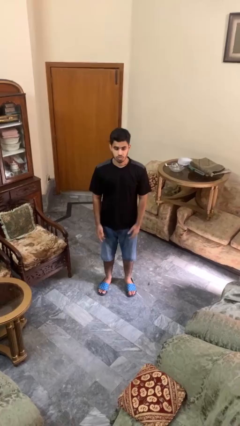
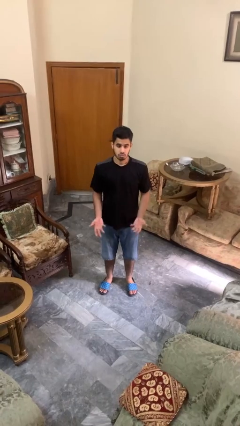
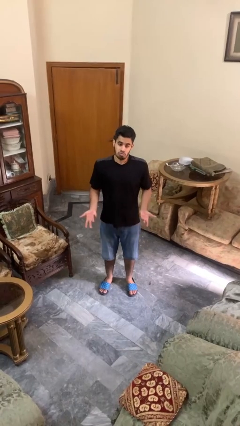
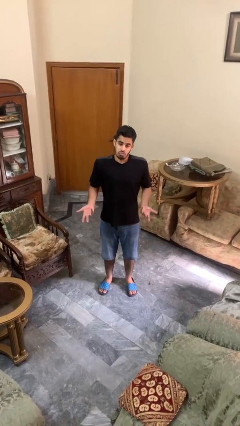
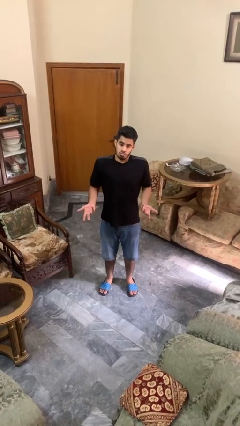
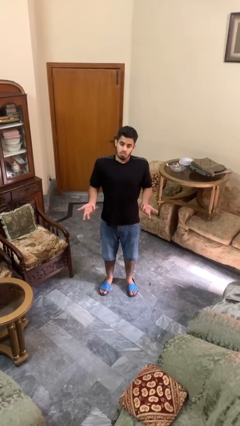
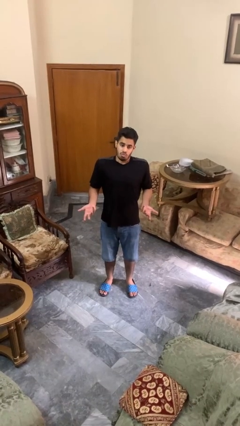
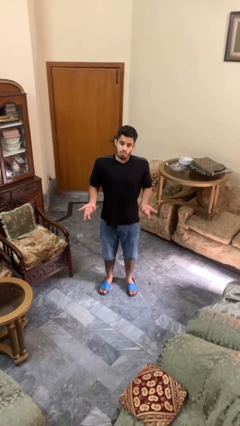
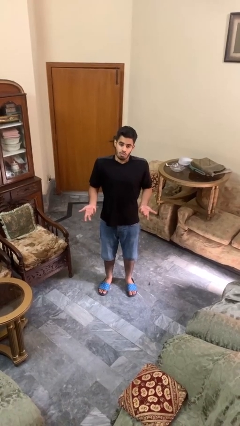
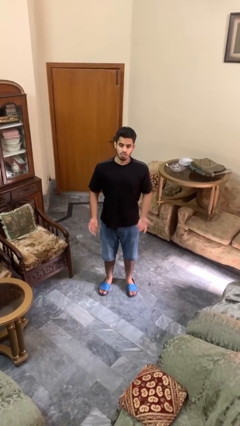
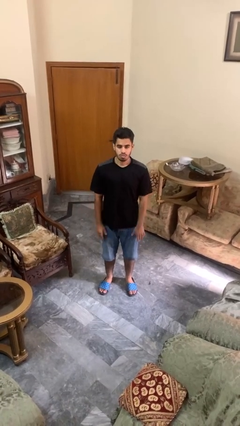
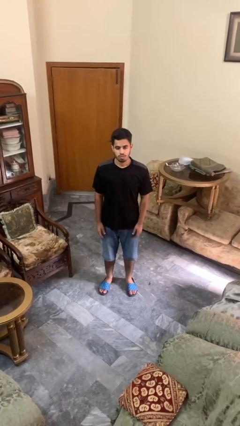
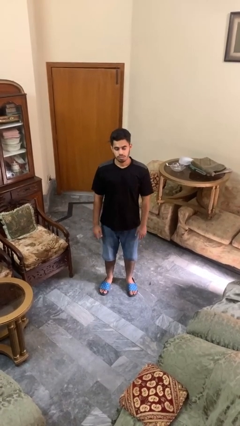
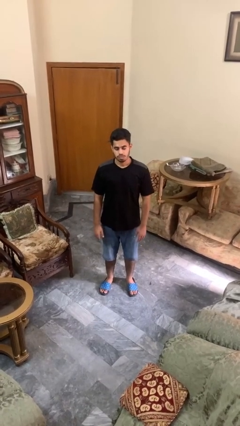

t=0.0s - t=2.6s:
person shrugs

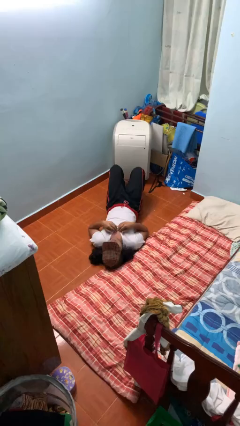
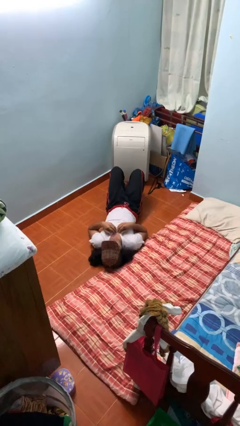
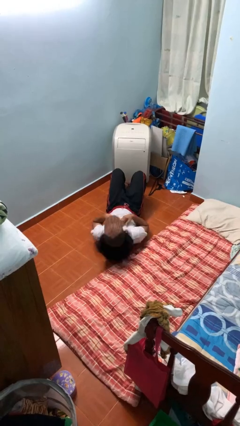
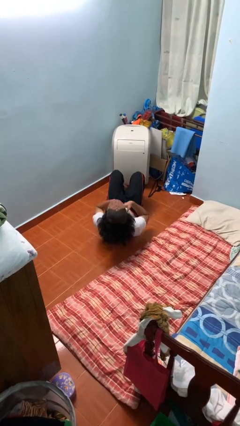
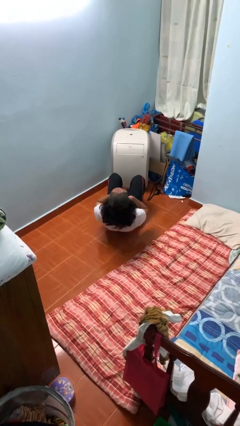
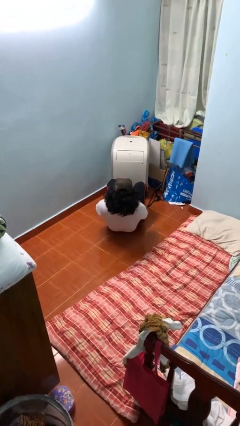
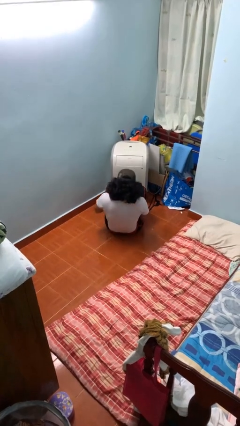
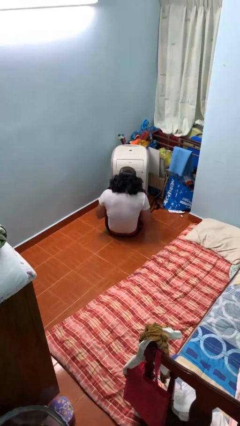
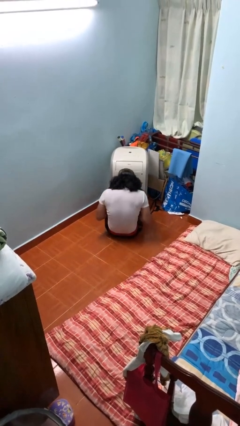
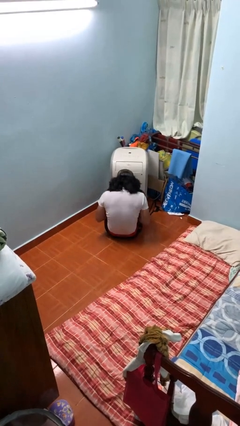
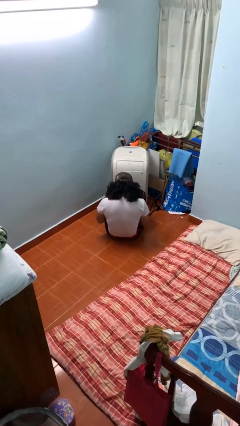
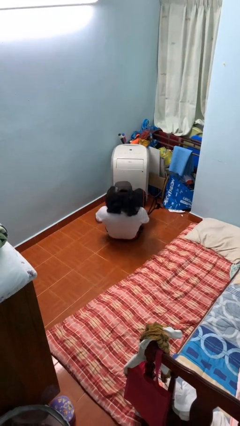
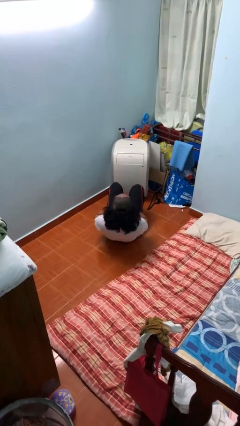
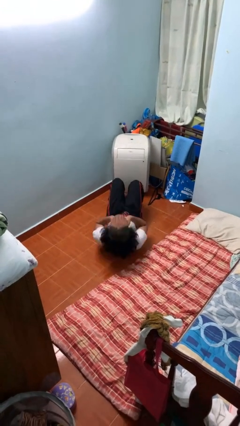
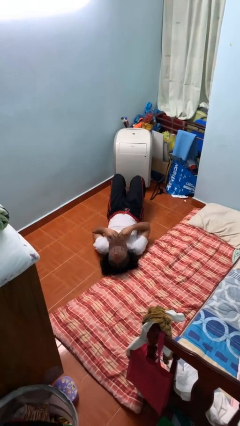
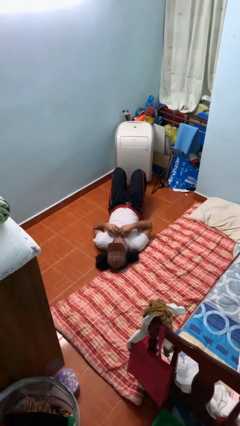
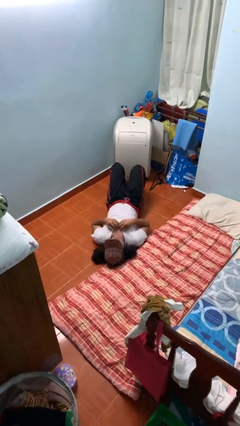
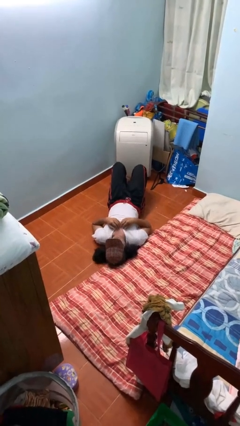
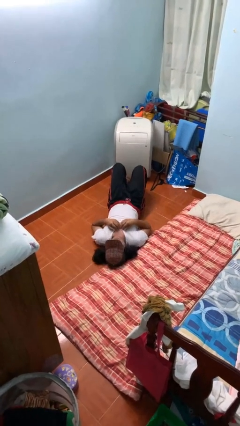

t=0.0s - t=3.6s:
person exercises with situp

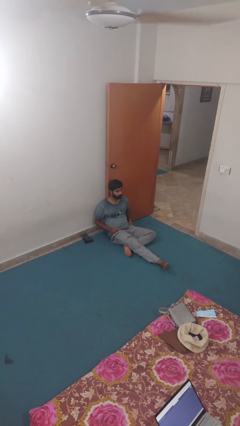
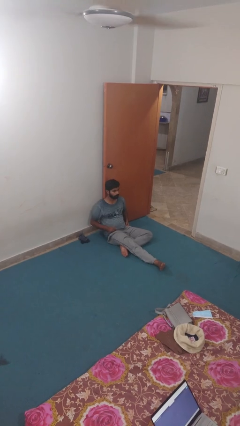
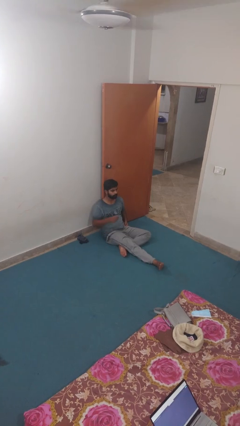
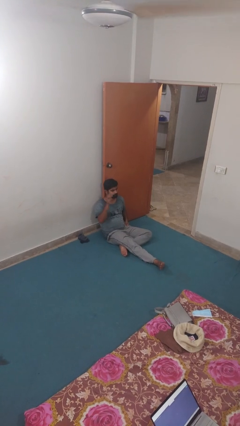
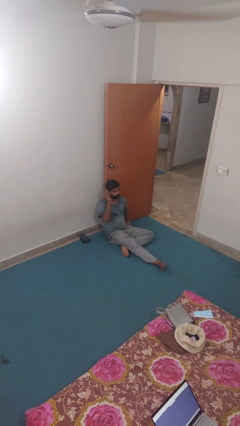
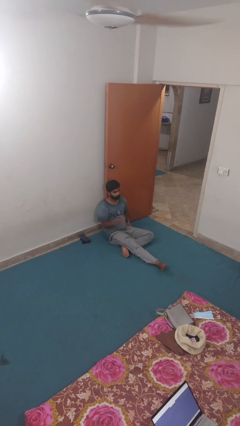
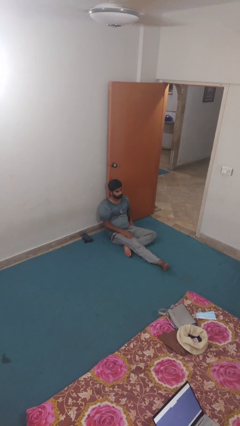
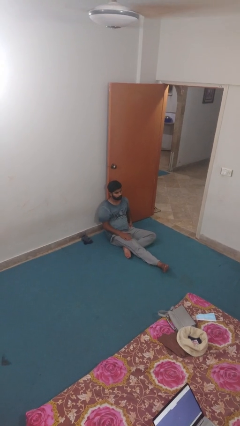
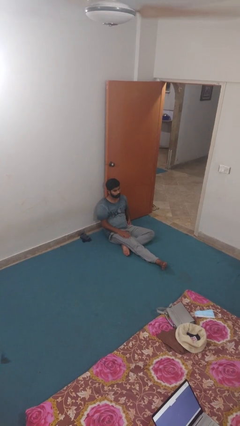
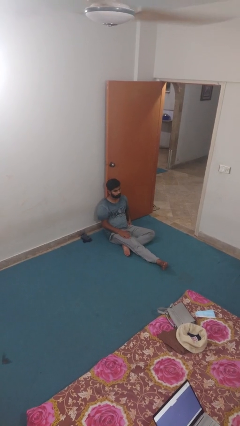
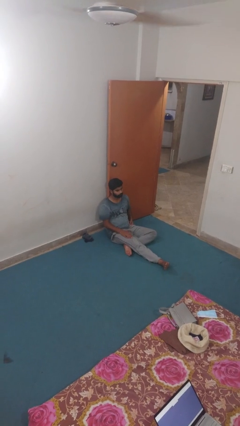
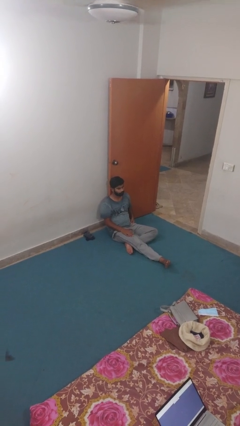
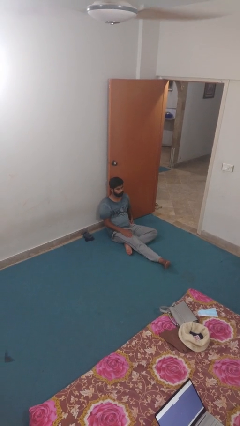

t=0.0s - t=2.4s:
person slaps hands on thighs

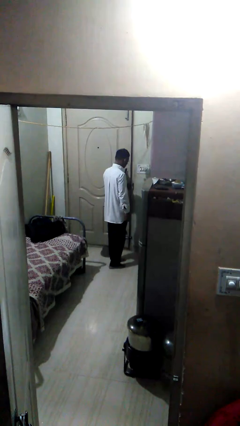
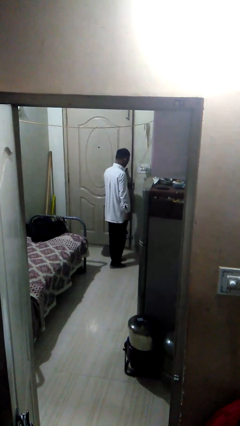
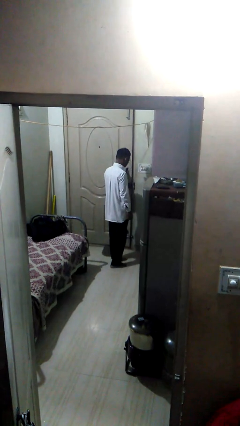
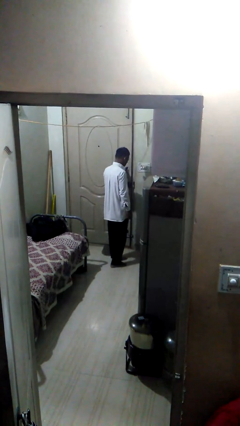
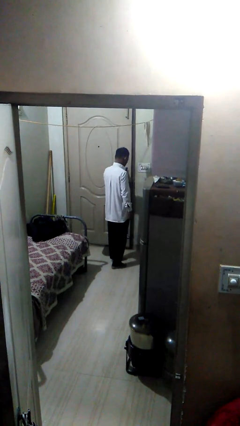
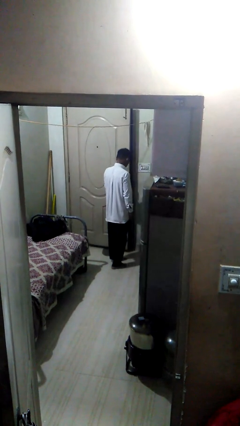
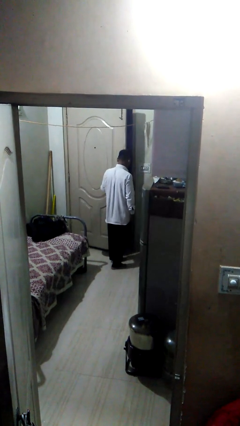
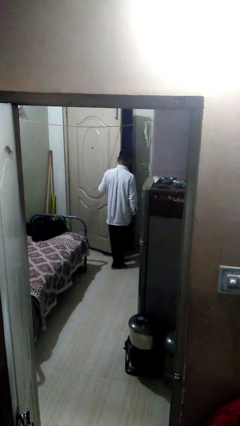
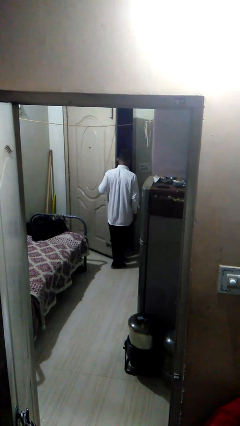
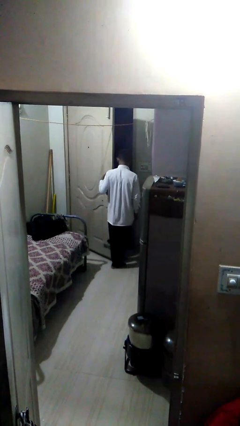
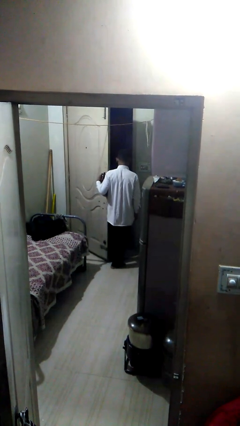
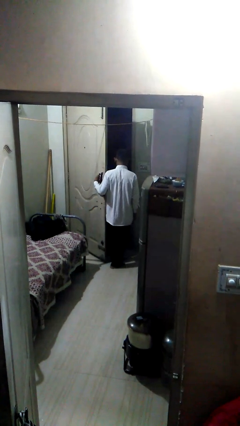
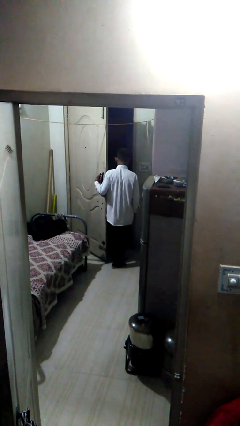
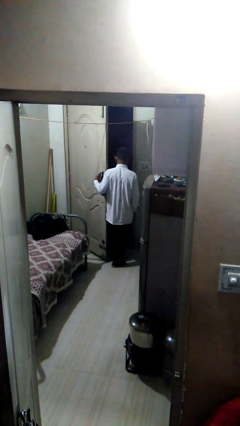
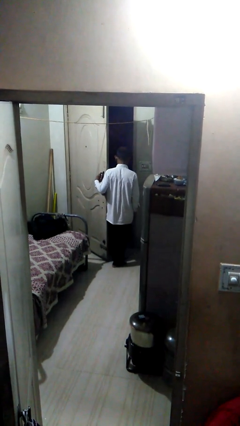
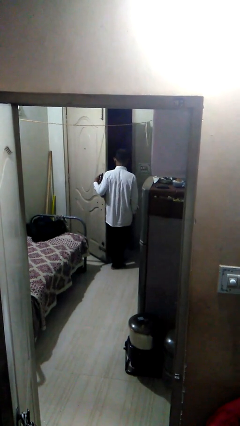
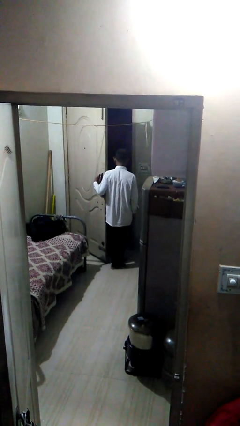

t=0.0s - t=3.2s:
person opens facility door

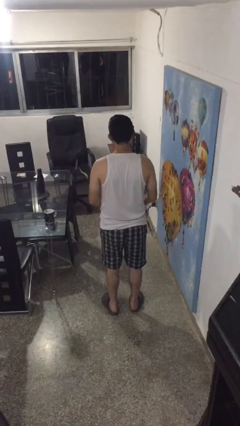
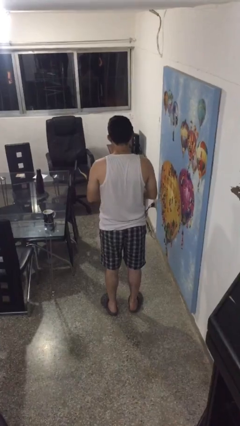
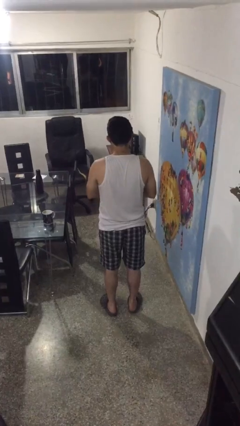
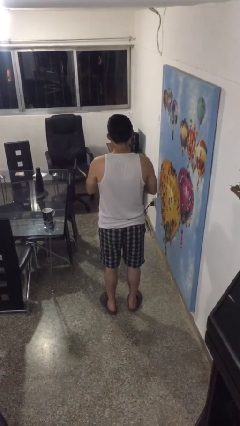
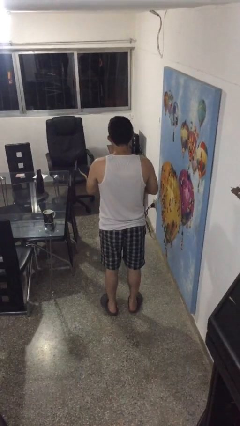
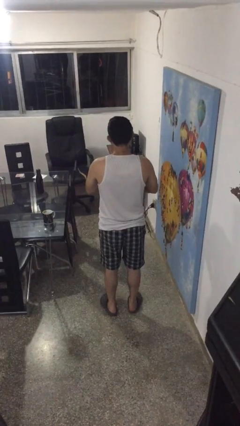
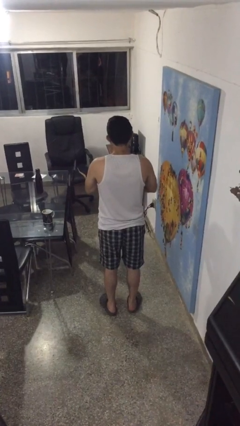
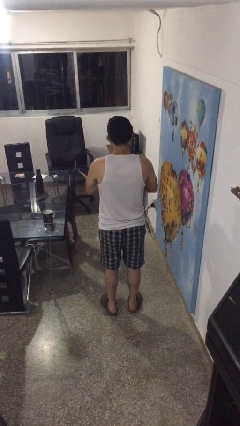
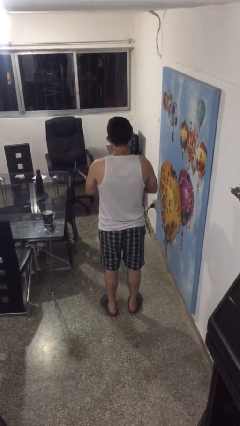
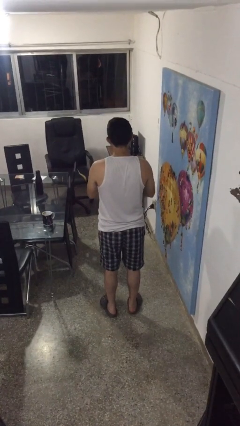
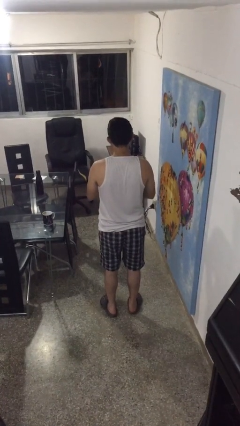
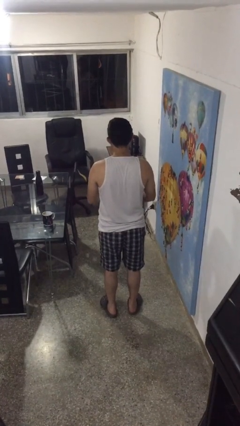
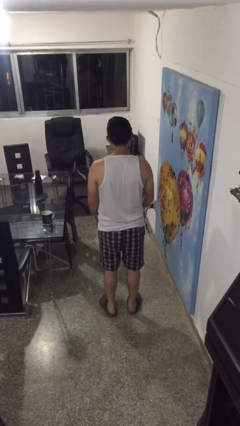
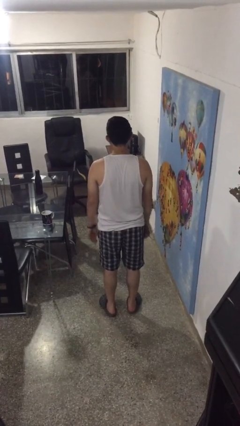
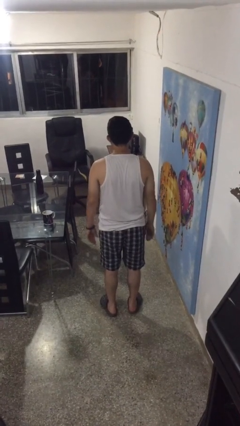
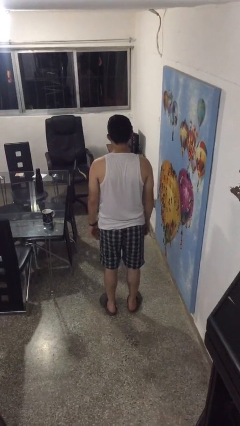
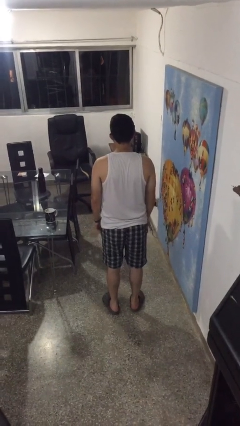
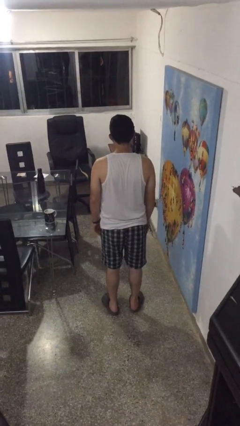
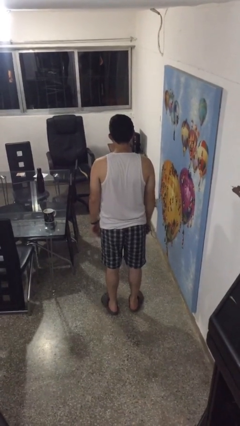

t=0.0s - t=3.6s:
person cracks knuckles

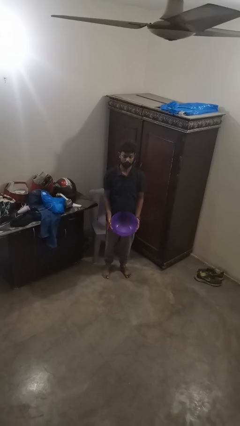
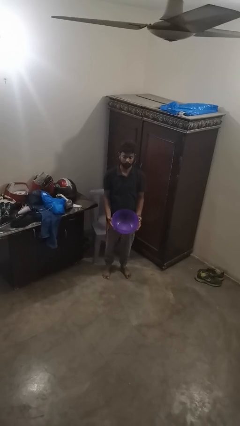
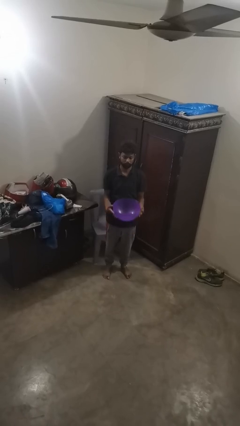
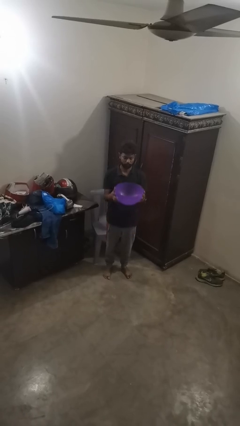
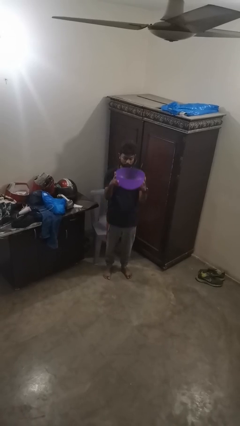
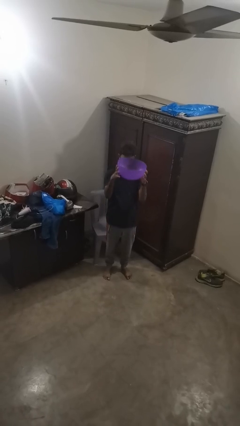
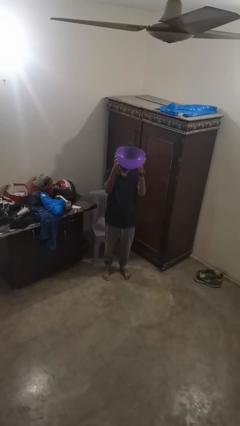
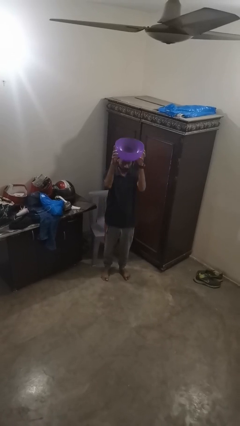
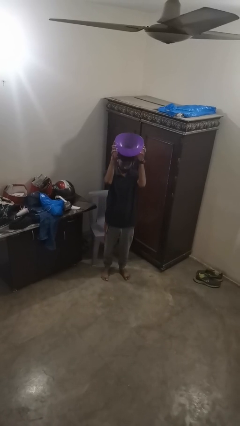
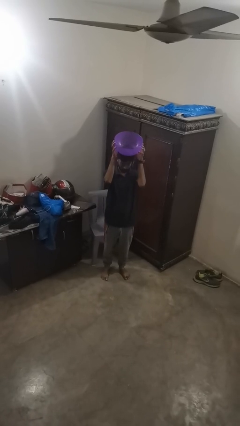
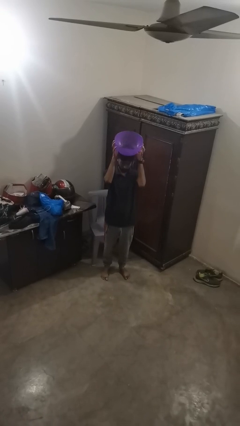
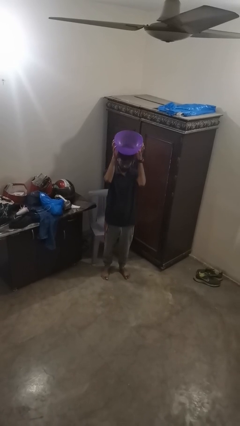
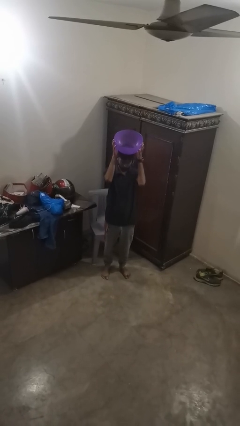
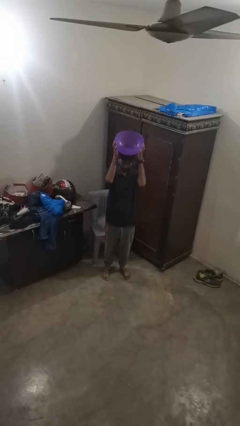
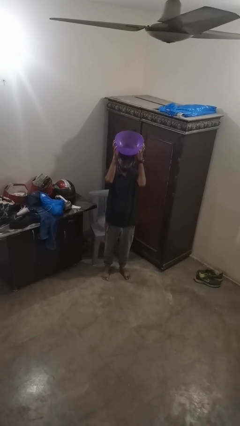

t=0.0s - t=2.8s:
person holds object above head
